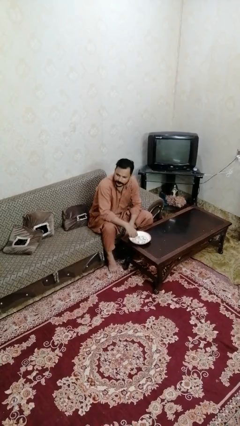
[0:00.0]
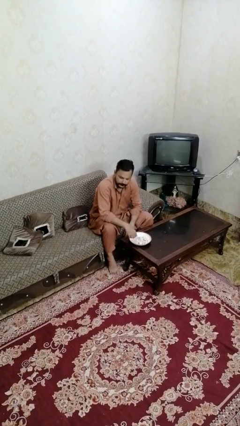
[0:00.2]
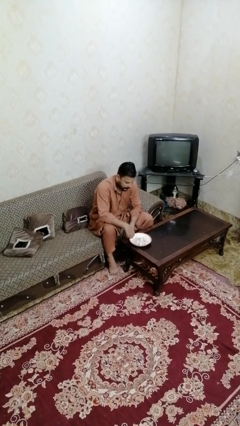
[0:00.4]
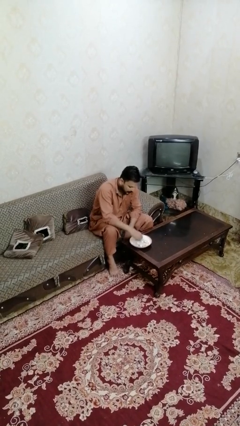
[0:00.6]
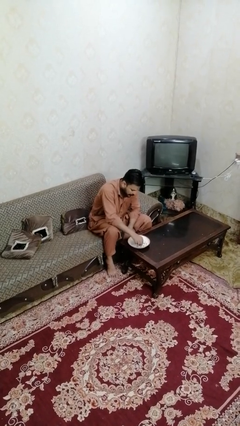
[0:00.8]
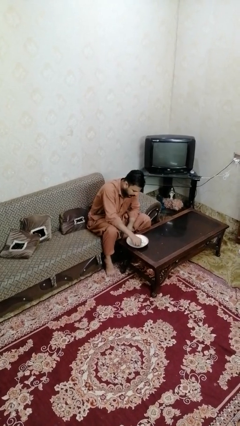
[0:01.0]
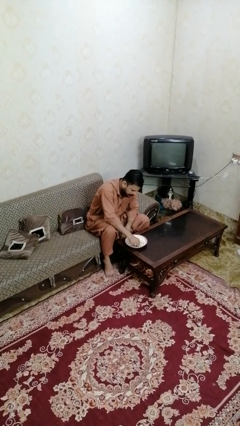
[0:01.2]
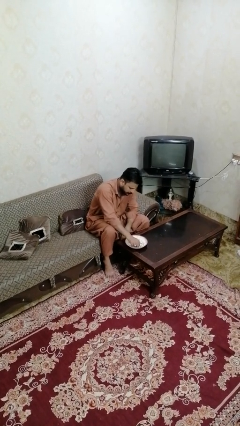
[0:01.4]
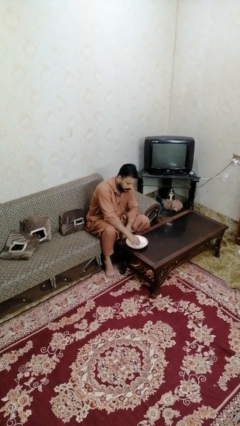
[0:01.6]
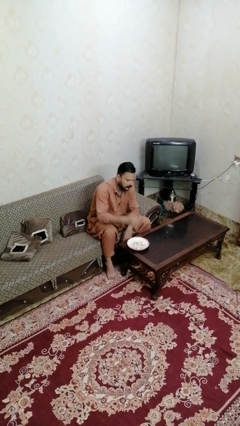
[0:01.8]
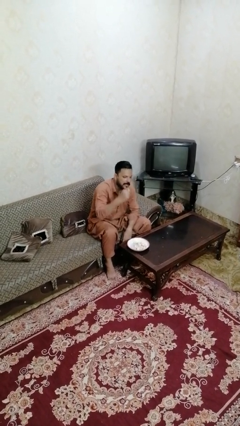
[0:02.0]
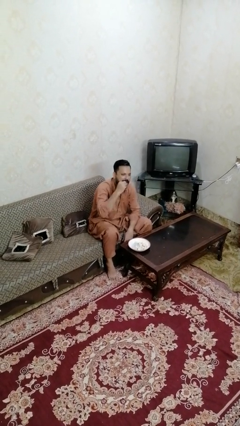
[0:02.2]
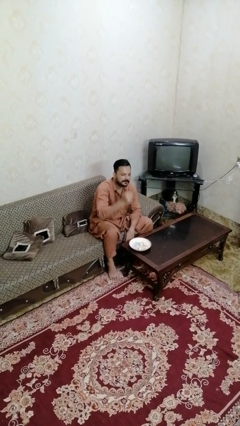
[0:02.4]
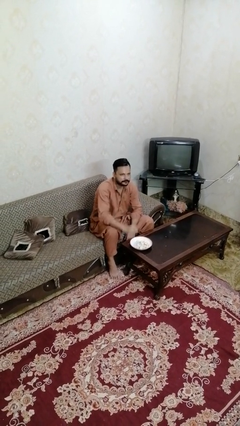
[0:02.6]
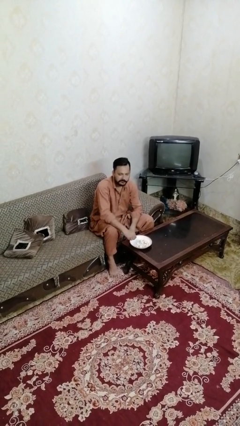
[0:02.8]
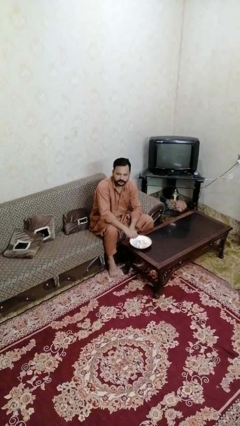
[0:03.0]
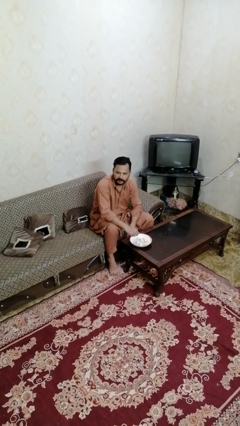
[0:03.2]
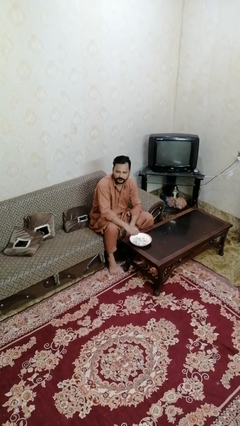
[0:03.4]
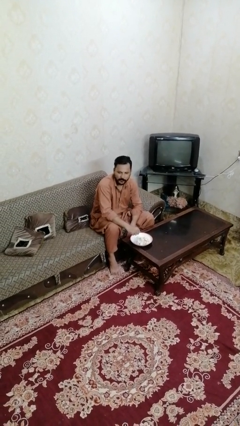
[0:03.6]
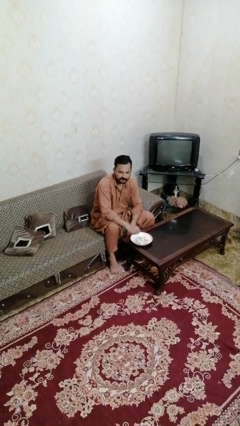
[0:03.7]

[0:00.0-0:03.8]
person eats with hands

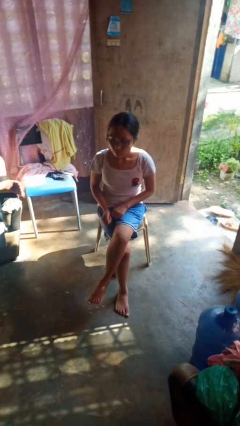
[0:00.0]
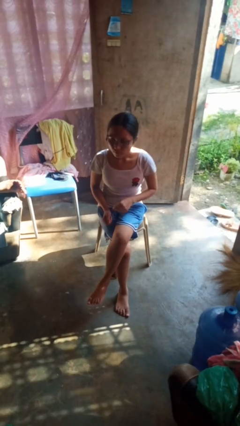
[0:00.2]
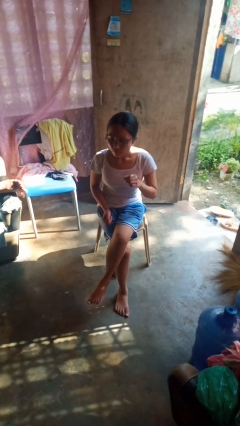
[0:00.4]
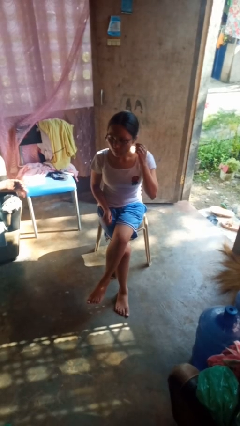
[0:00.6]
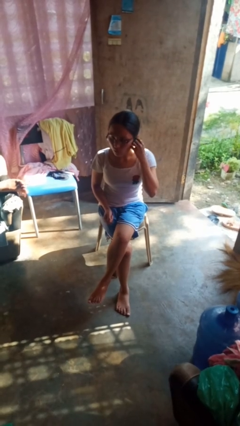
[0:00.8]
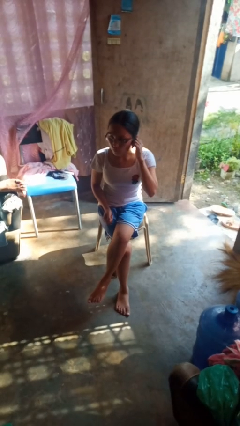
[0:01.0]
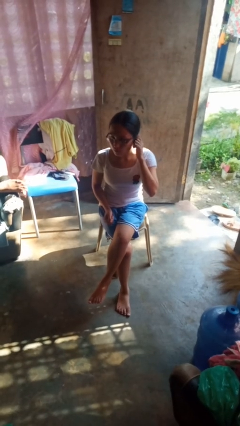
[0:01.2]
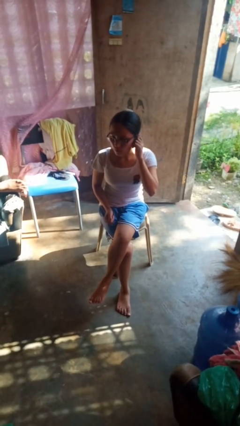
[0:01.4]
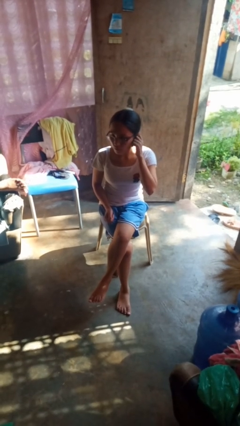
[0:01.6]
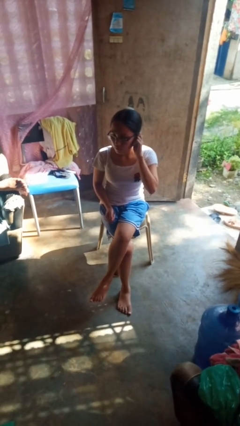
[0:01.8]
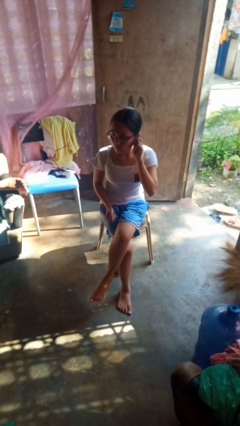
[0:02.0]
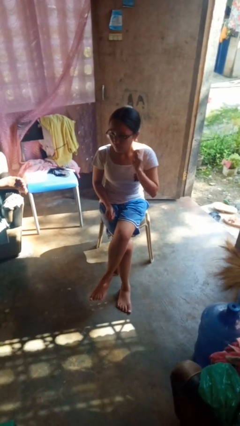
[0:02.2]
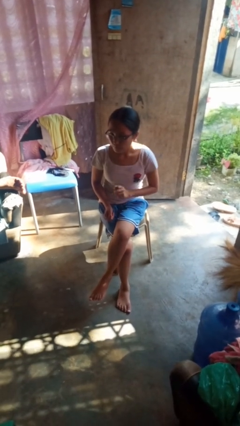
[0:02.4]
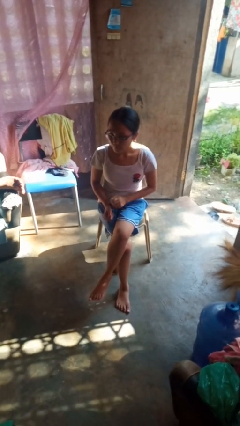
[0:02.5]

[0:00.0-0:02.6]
person touches earlobe

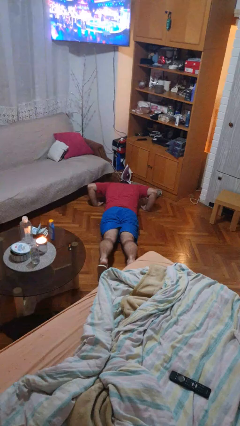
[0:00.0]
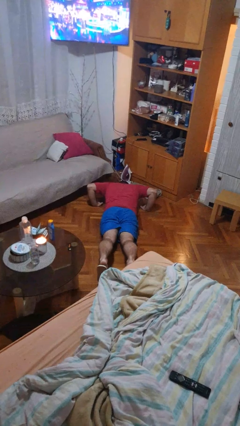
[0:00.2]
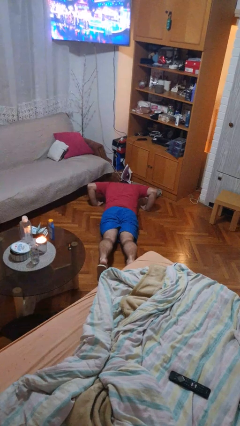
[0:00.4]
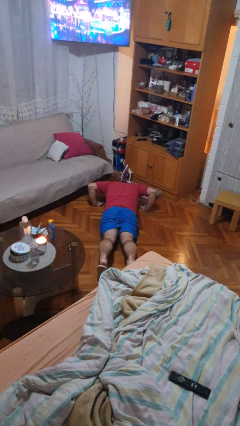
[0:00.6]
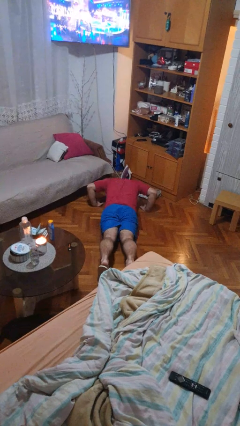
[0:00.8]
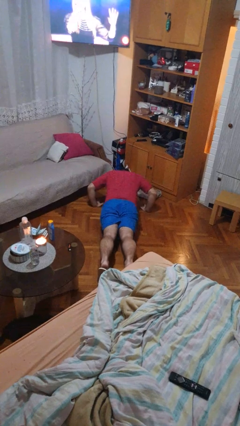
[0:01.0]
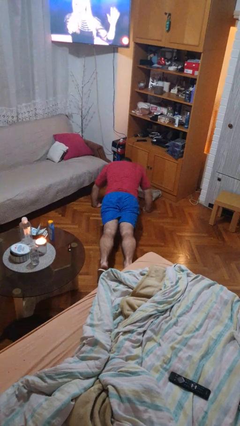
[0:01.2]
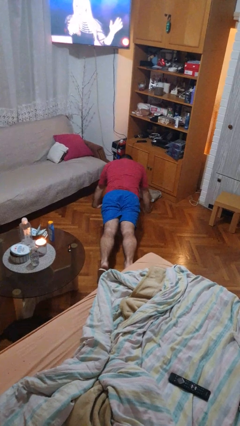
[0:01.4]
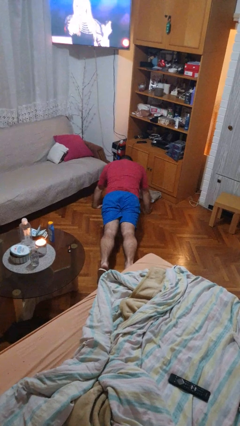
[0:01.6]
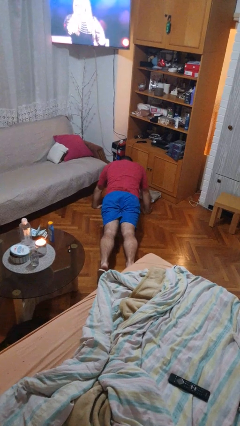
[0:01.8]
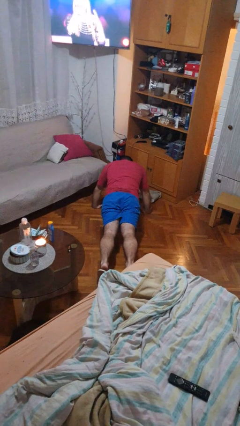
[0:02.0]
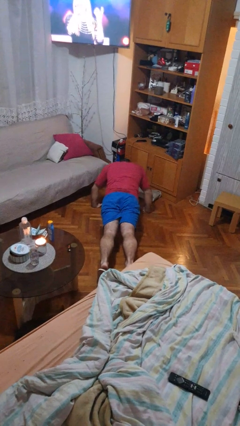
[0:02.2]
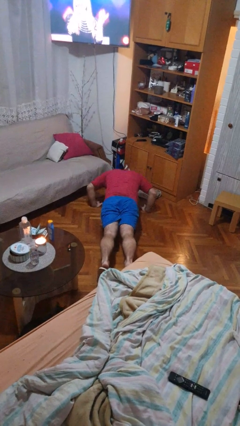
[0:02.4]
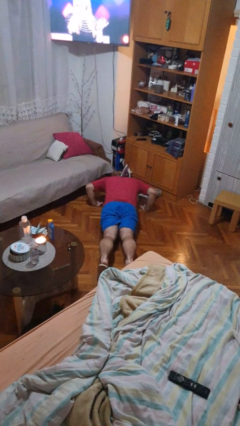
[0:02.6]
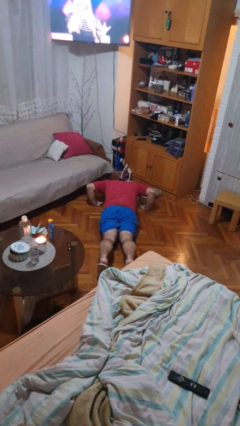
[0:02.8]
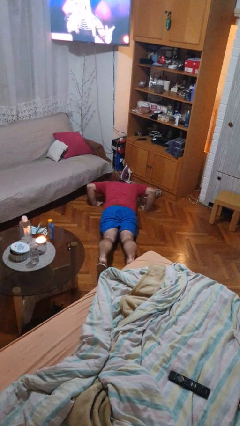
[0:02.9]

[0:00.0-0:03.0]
person exercises with pushup

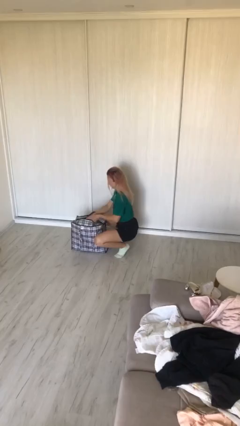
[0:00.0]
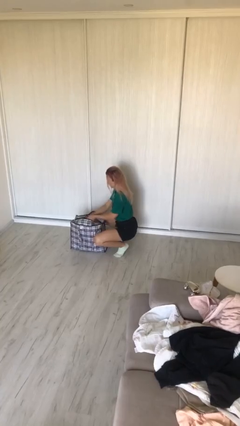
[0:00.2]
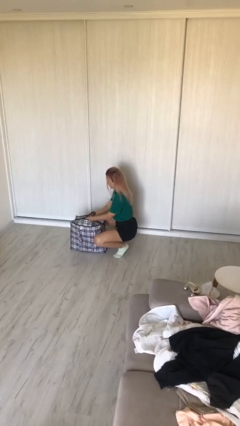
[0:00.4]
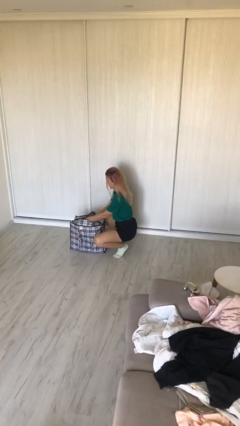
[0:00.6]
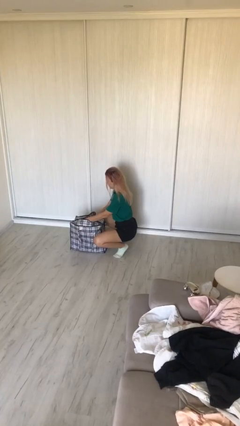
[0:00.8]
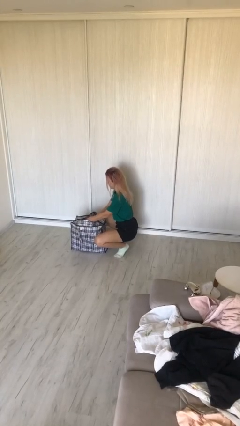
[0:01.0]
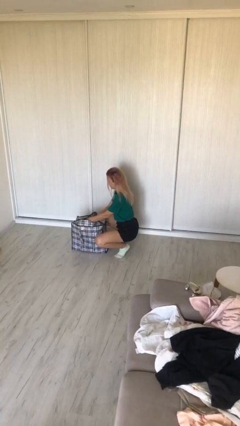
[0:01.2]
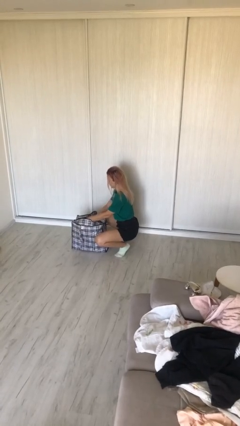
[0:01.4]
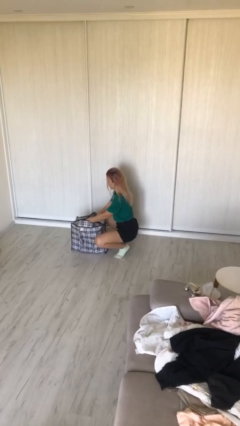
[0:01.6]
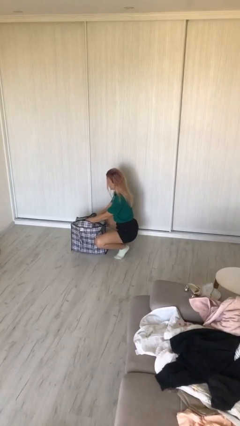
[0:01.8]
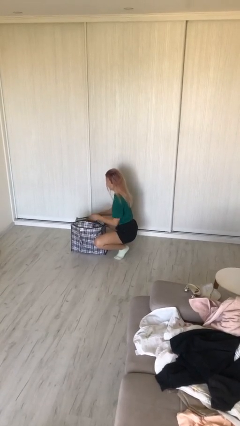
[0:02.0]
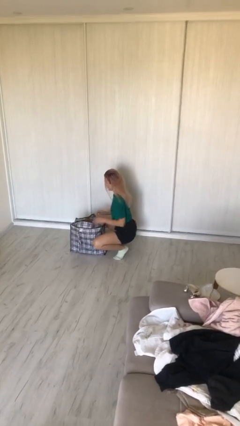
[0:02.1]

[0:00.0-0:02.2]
person searches in bag

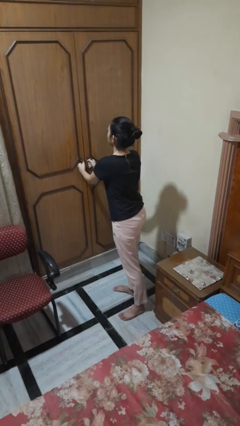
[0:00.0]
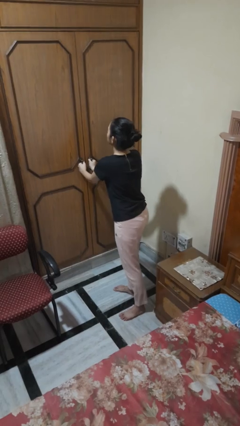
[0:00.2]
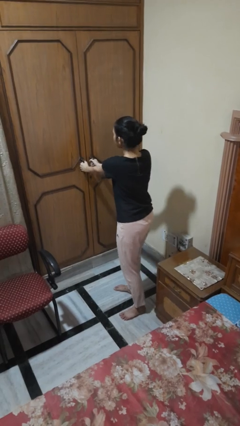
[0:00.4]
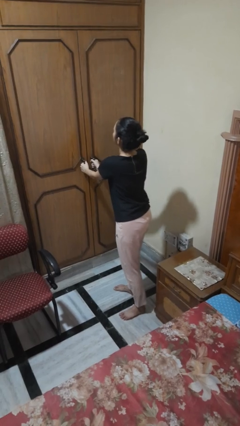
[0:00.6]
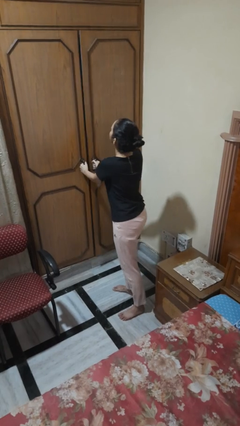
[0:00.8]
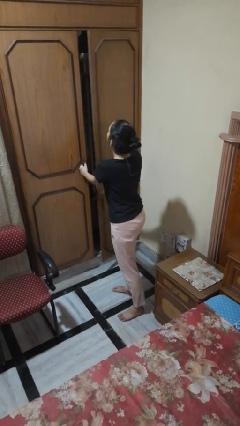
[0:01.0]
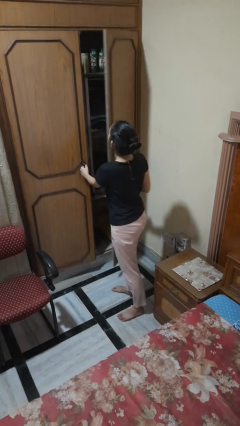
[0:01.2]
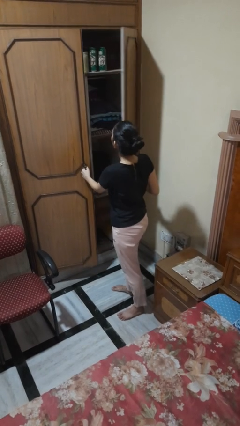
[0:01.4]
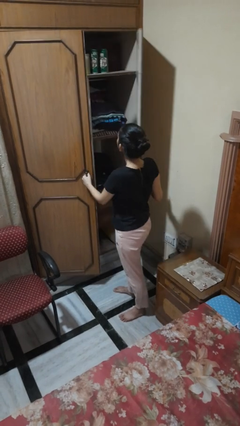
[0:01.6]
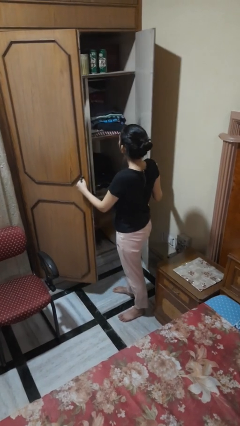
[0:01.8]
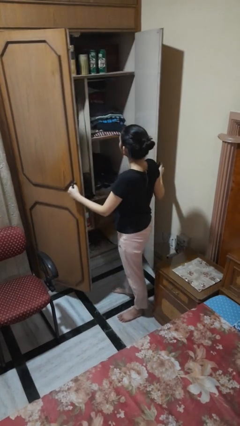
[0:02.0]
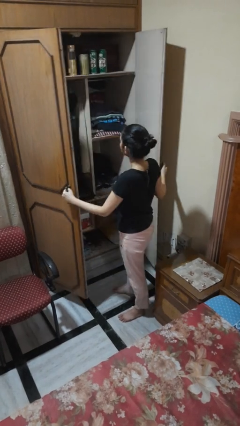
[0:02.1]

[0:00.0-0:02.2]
person opens closet door

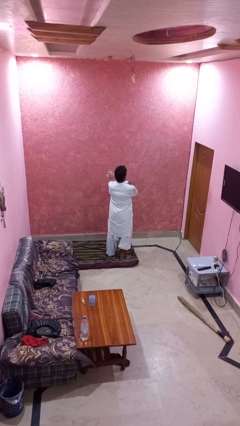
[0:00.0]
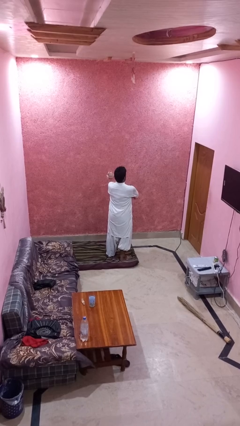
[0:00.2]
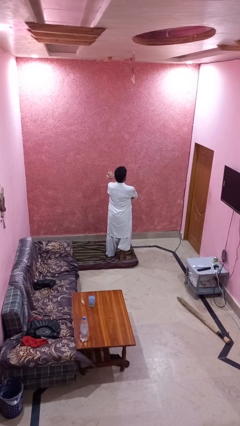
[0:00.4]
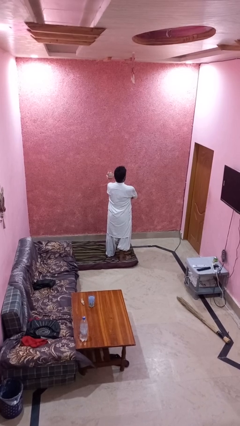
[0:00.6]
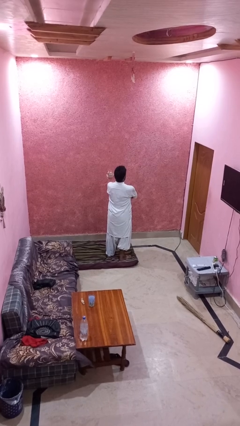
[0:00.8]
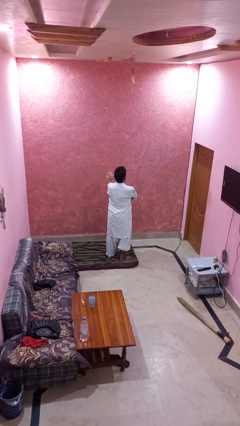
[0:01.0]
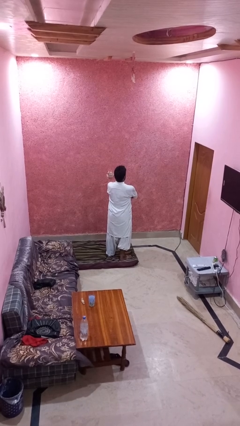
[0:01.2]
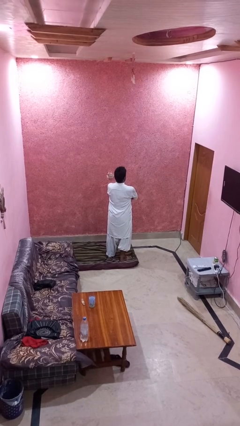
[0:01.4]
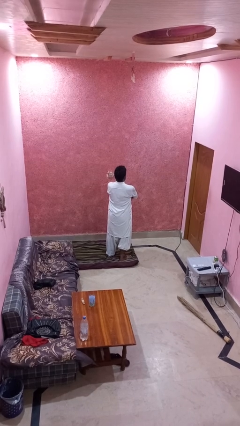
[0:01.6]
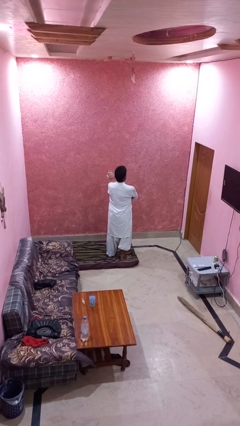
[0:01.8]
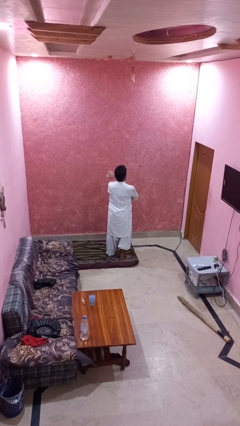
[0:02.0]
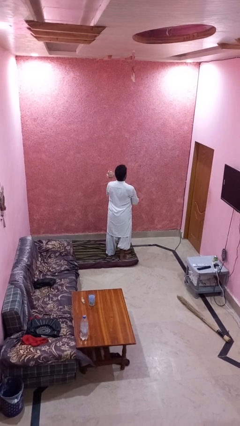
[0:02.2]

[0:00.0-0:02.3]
person crosses arms

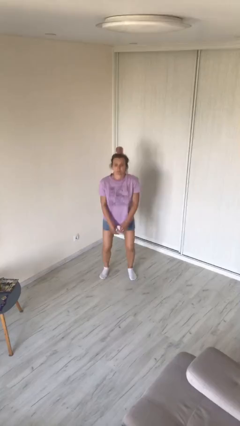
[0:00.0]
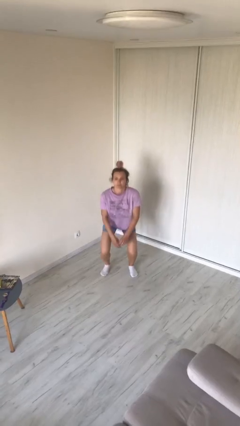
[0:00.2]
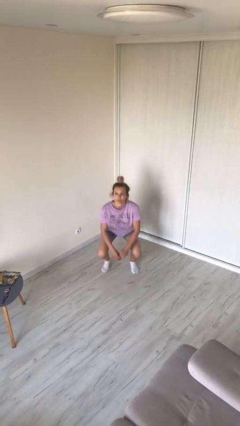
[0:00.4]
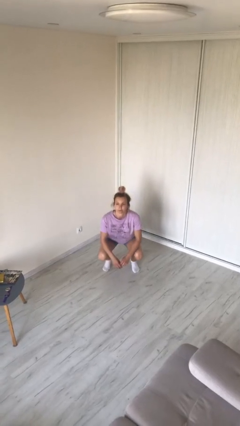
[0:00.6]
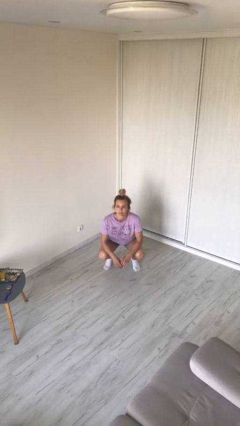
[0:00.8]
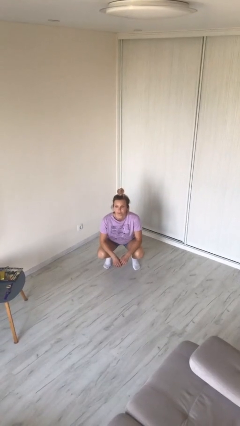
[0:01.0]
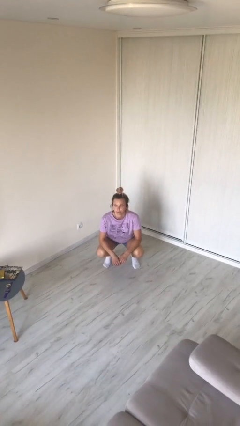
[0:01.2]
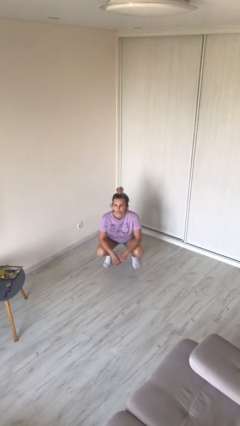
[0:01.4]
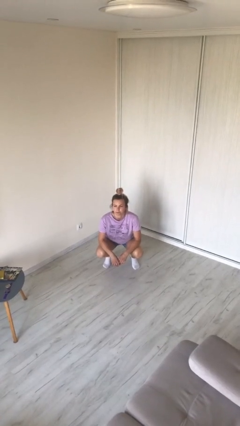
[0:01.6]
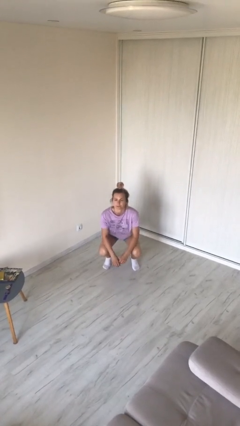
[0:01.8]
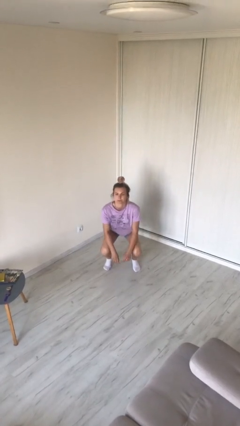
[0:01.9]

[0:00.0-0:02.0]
person squats
